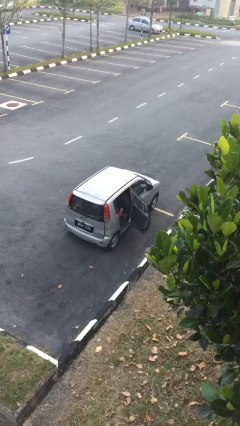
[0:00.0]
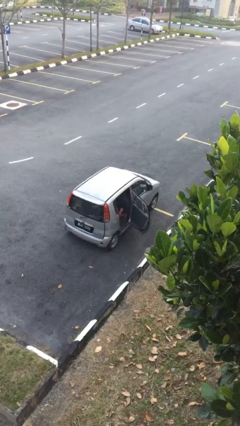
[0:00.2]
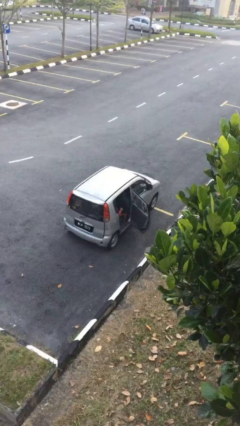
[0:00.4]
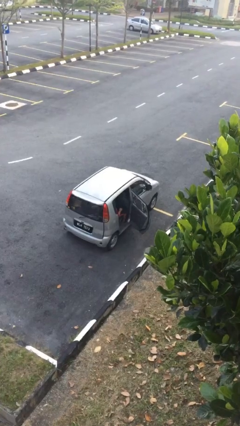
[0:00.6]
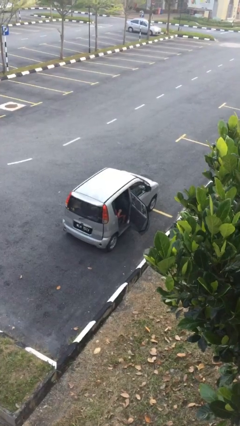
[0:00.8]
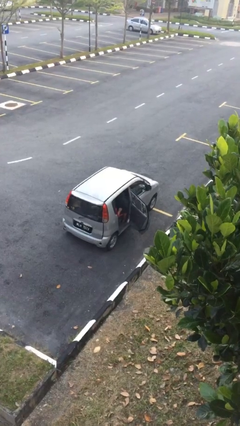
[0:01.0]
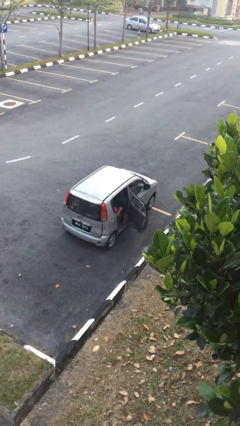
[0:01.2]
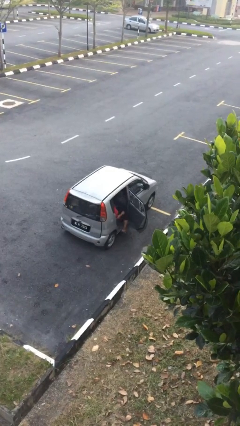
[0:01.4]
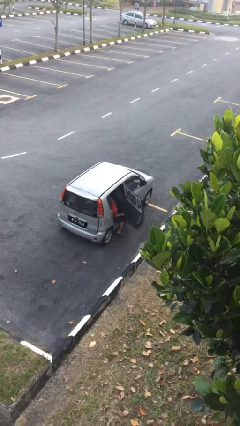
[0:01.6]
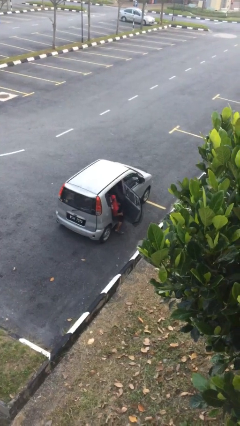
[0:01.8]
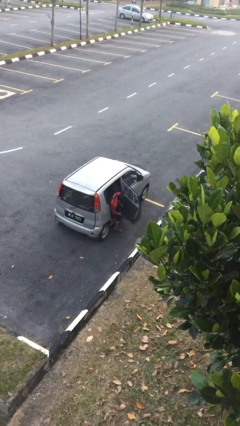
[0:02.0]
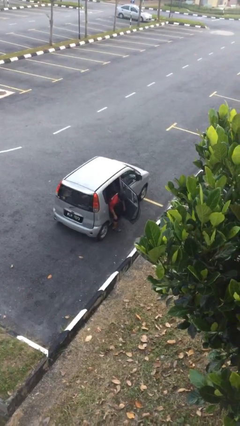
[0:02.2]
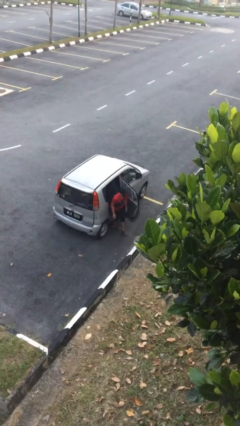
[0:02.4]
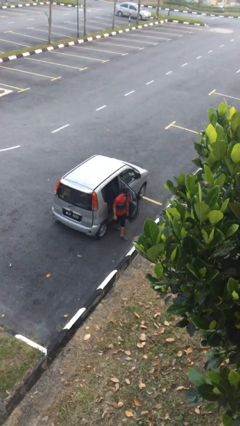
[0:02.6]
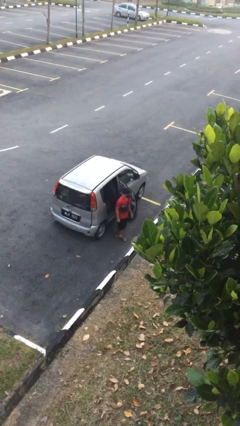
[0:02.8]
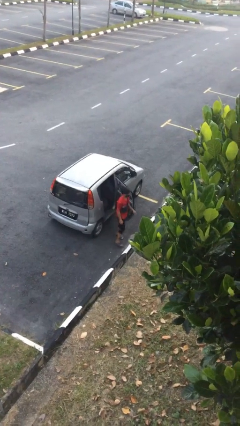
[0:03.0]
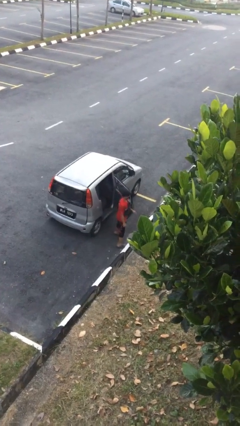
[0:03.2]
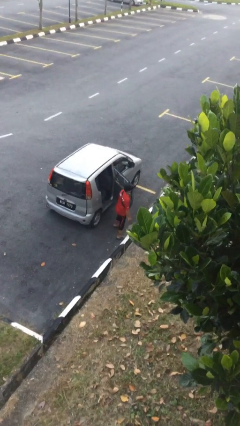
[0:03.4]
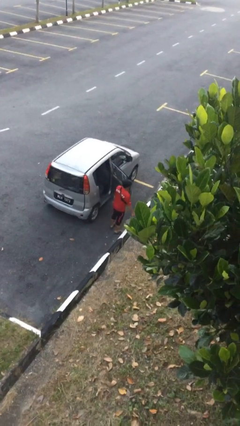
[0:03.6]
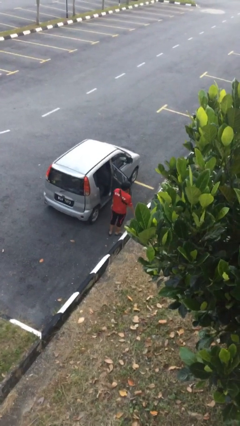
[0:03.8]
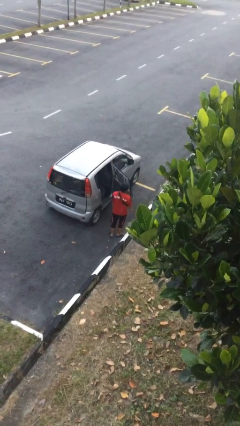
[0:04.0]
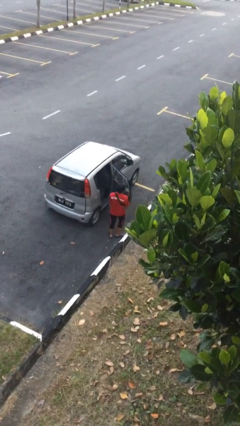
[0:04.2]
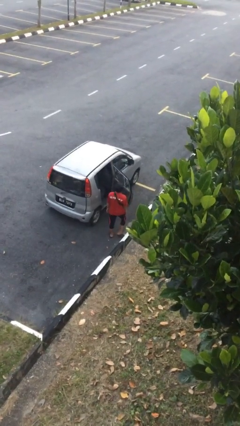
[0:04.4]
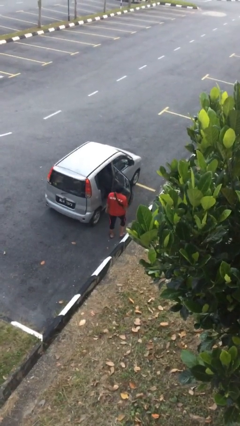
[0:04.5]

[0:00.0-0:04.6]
person exits car

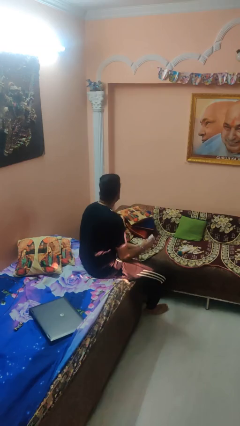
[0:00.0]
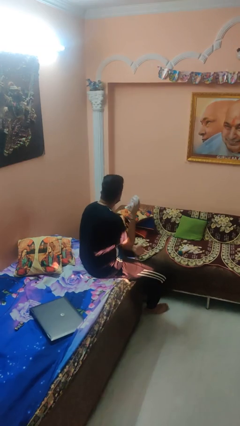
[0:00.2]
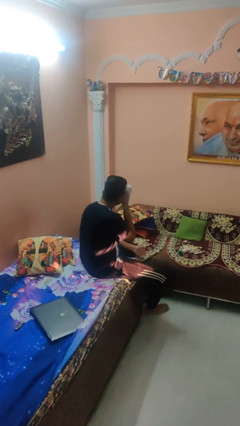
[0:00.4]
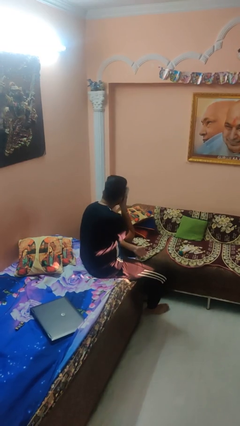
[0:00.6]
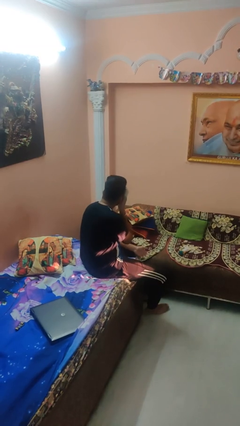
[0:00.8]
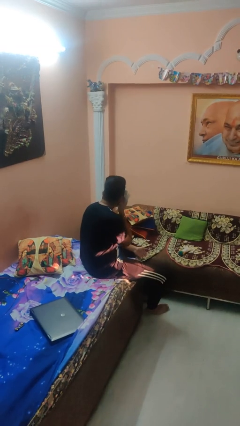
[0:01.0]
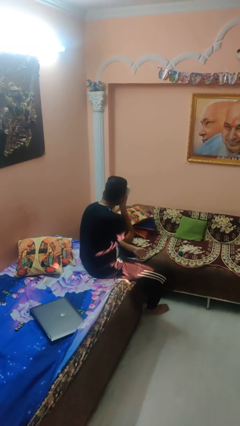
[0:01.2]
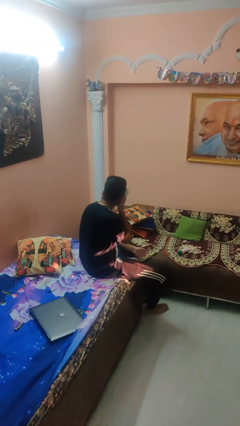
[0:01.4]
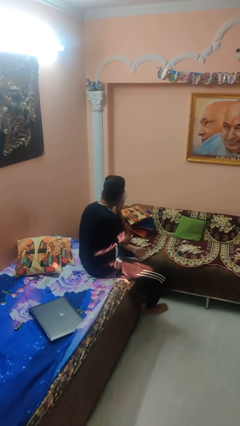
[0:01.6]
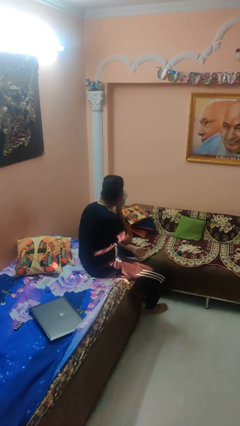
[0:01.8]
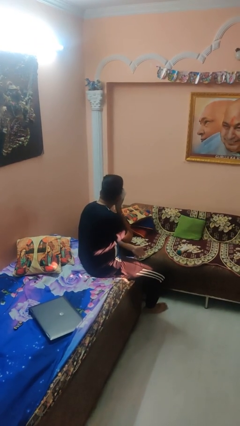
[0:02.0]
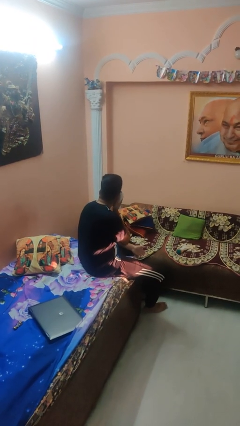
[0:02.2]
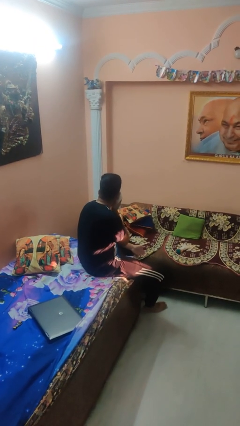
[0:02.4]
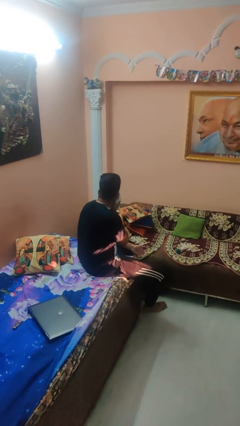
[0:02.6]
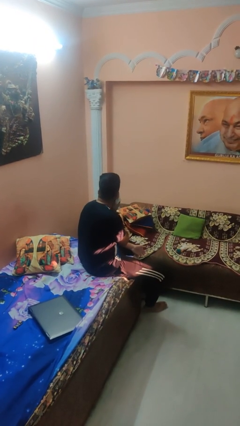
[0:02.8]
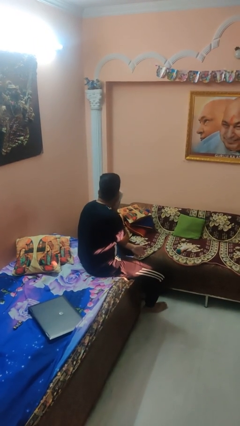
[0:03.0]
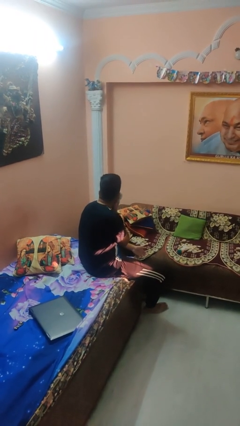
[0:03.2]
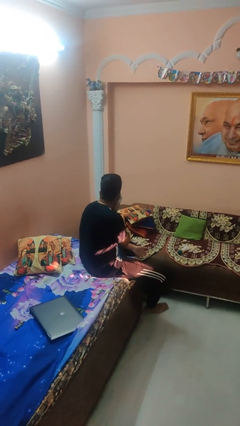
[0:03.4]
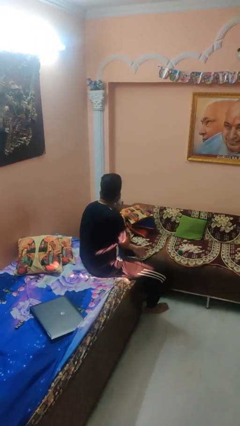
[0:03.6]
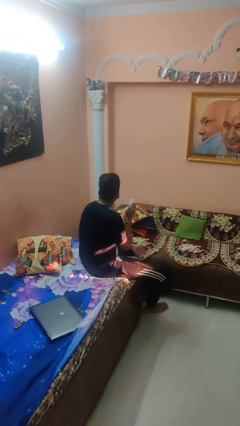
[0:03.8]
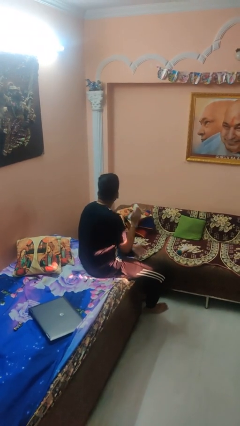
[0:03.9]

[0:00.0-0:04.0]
person wipes mouth with napkin

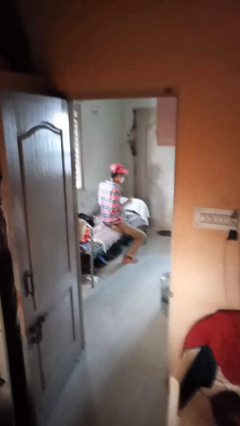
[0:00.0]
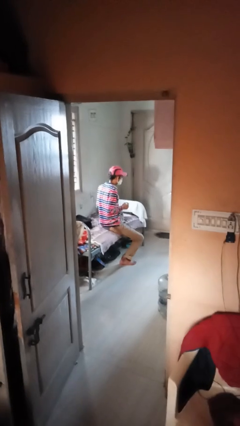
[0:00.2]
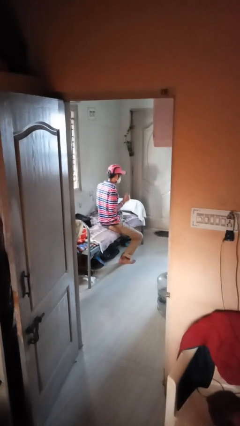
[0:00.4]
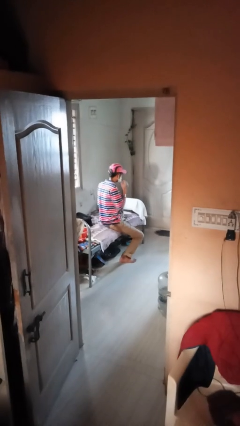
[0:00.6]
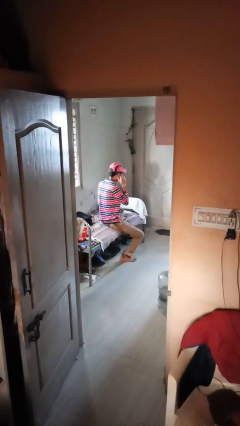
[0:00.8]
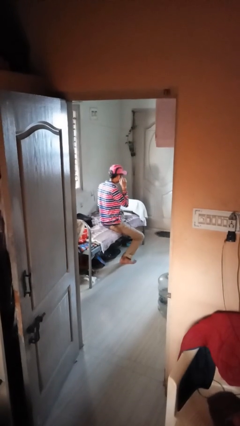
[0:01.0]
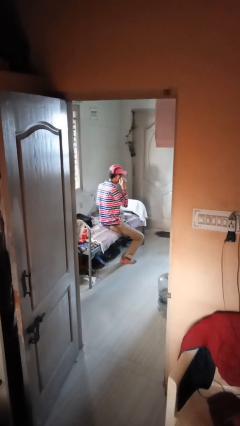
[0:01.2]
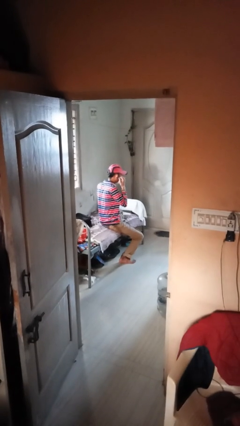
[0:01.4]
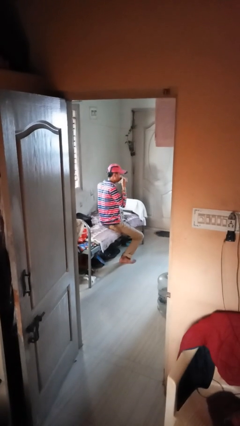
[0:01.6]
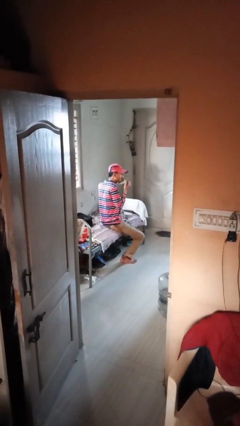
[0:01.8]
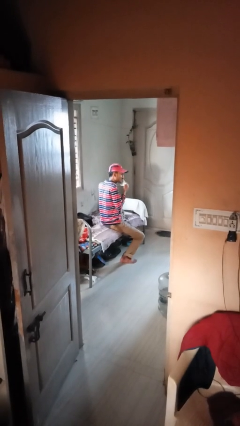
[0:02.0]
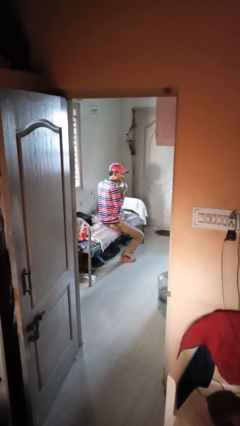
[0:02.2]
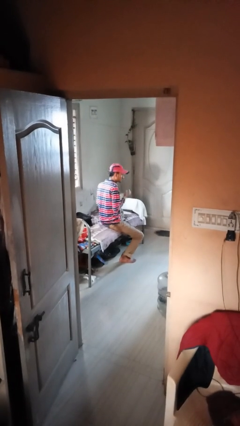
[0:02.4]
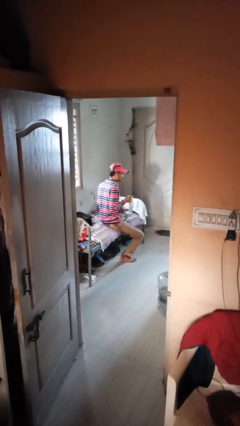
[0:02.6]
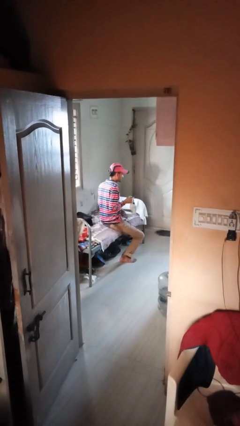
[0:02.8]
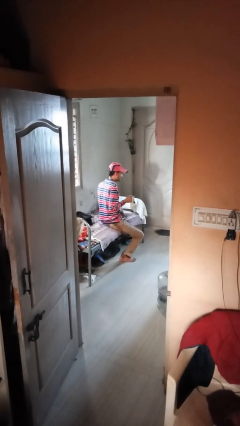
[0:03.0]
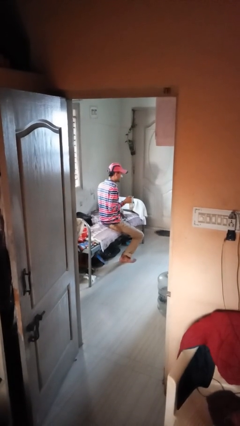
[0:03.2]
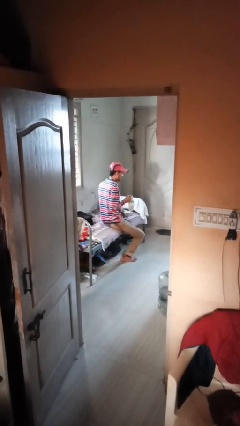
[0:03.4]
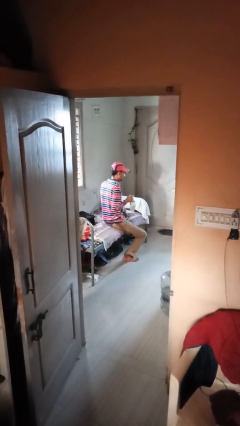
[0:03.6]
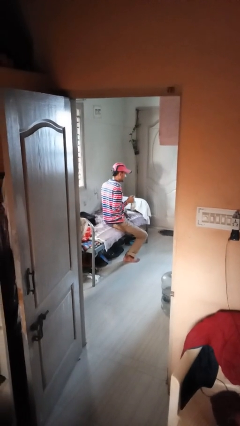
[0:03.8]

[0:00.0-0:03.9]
person takes off facemask

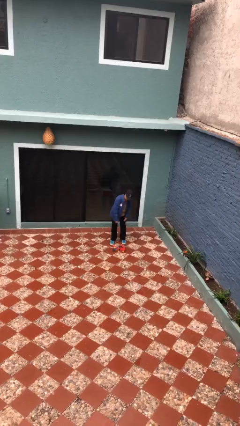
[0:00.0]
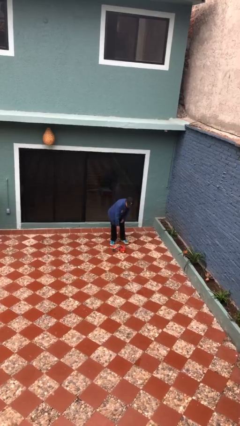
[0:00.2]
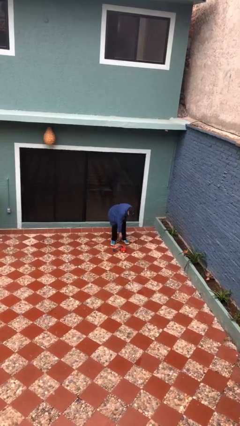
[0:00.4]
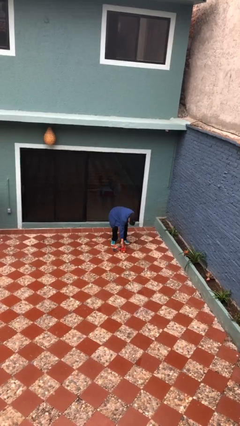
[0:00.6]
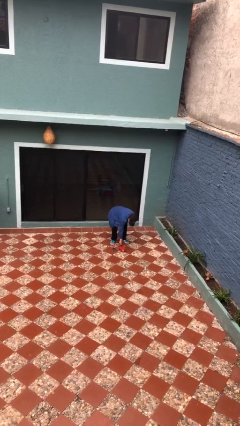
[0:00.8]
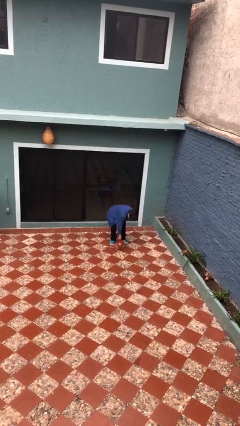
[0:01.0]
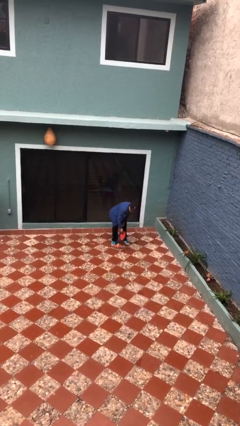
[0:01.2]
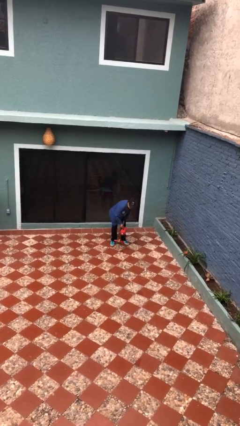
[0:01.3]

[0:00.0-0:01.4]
person picks up object from floor

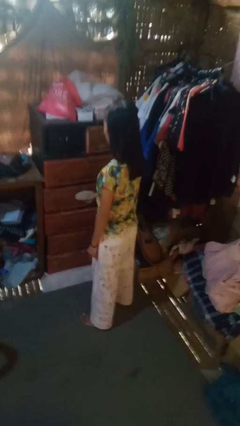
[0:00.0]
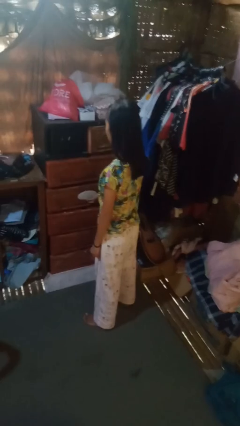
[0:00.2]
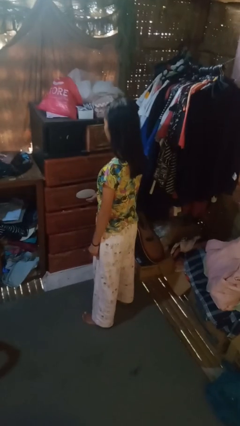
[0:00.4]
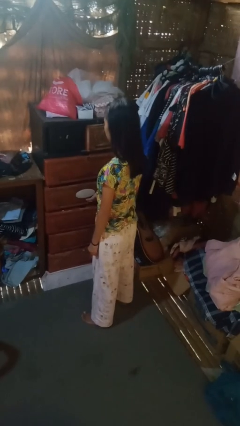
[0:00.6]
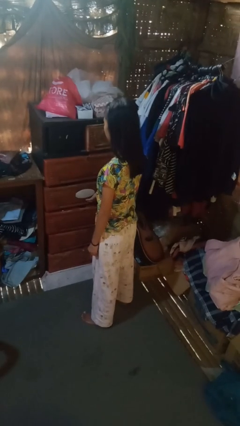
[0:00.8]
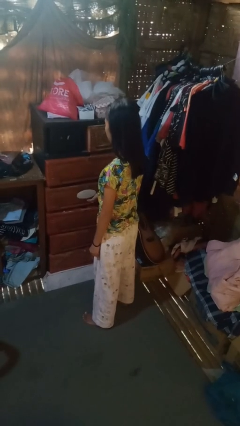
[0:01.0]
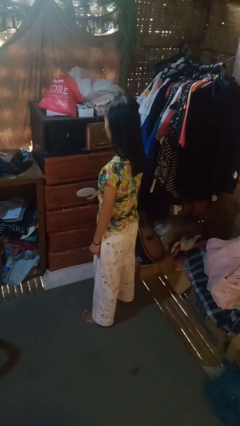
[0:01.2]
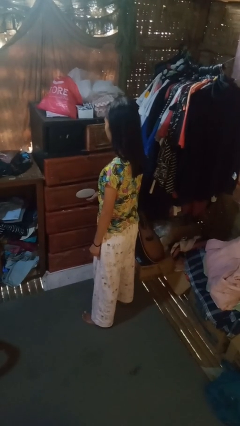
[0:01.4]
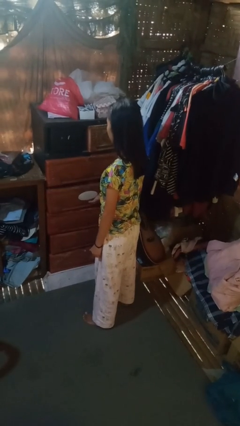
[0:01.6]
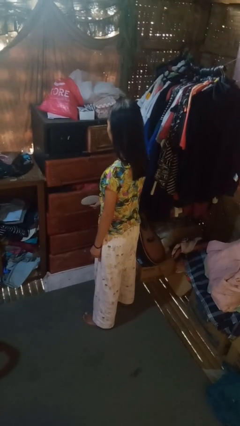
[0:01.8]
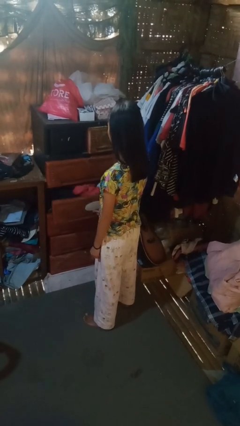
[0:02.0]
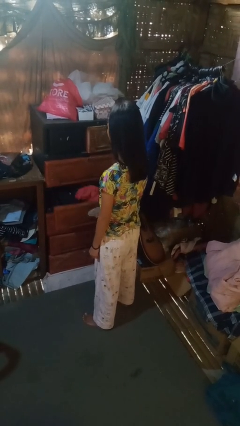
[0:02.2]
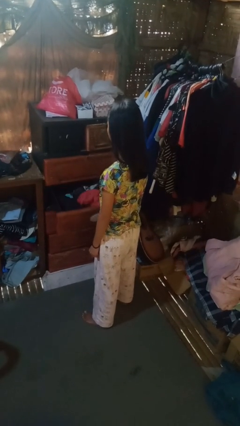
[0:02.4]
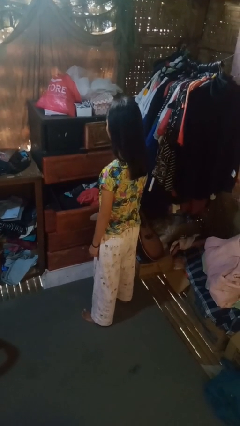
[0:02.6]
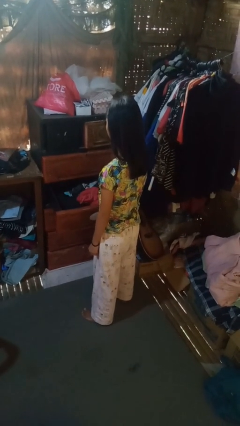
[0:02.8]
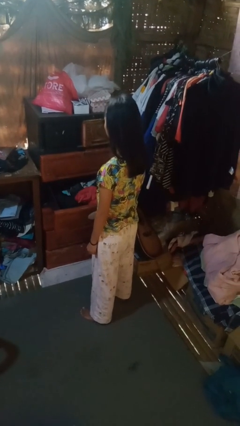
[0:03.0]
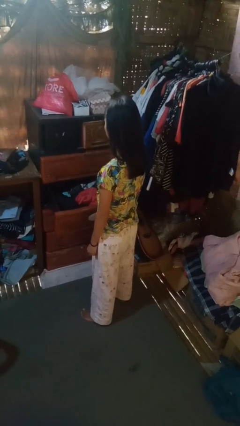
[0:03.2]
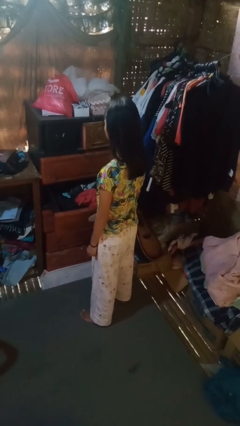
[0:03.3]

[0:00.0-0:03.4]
person opens dresser drawer

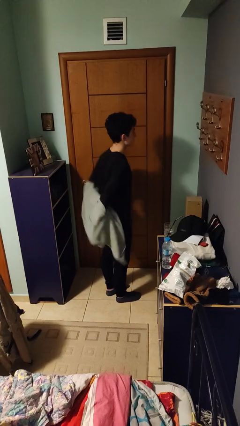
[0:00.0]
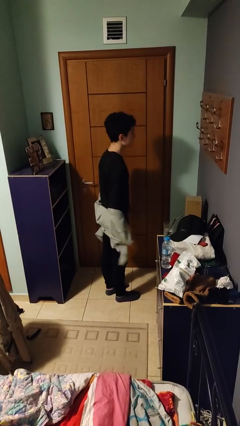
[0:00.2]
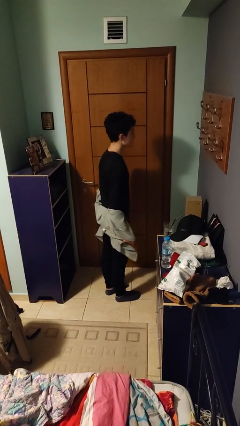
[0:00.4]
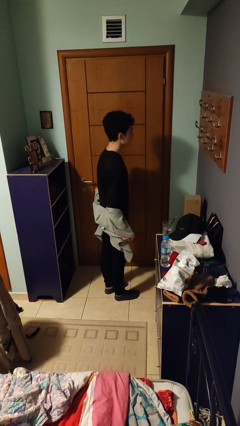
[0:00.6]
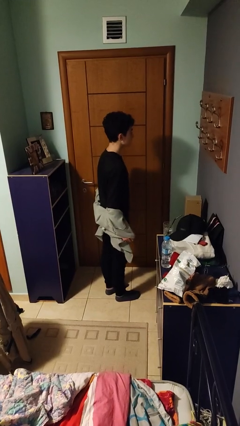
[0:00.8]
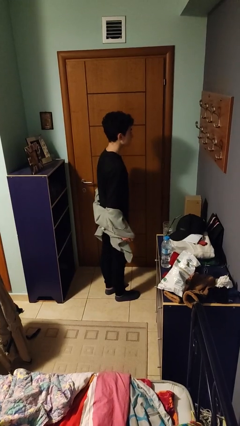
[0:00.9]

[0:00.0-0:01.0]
person takes off jacket
